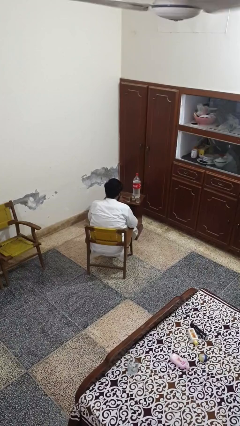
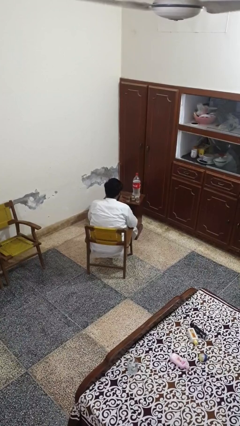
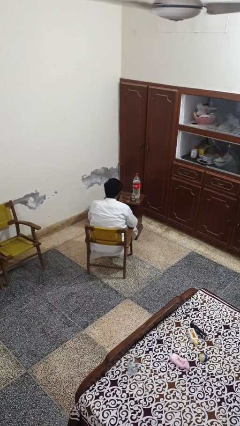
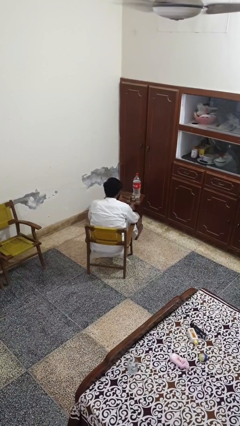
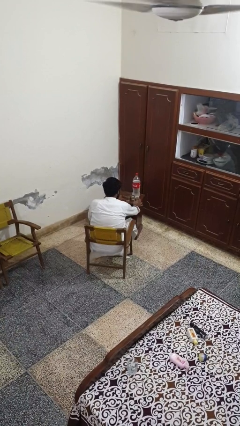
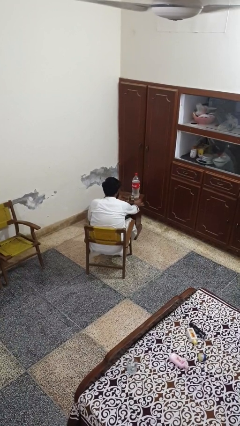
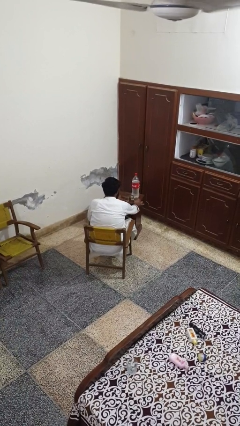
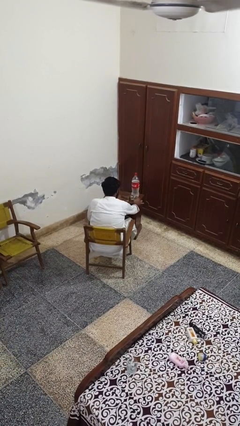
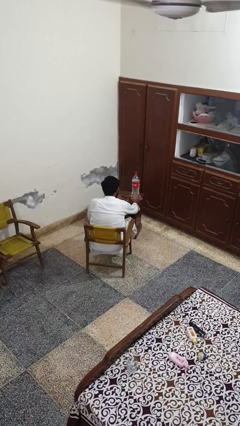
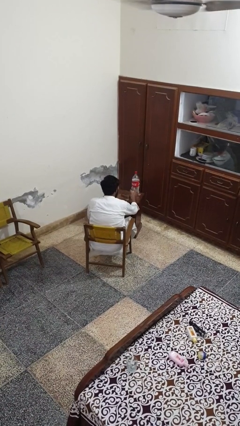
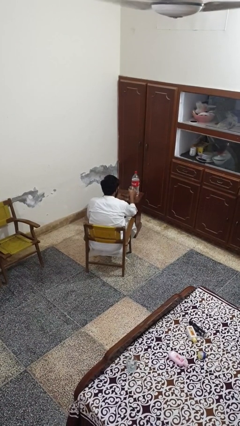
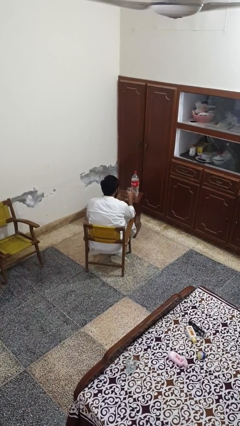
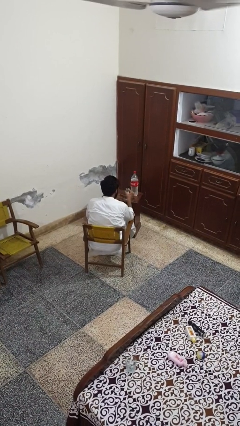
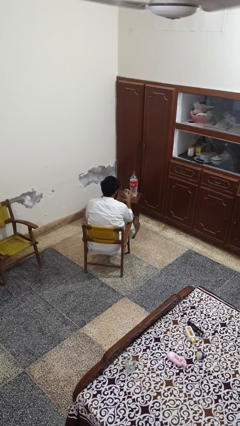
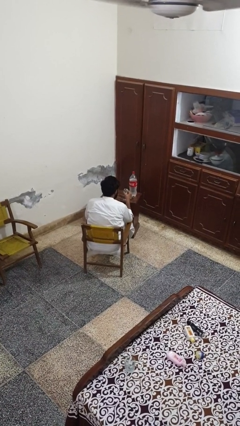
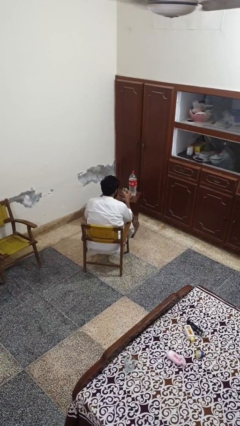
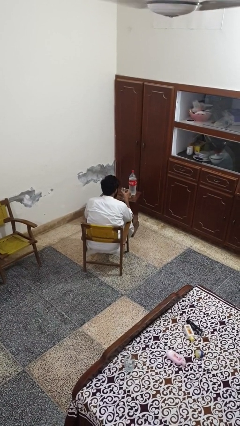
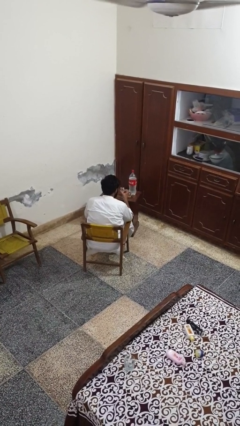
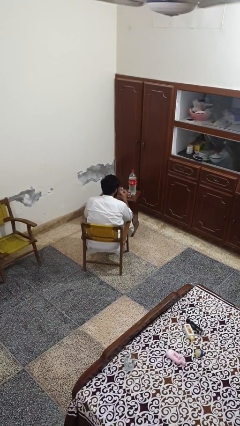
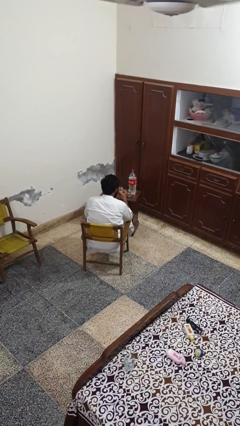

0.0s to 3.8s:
person picks up object from table

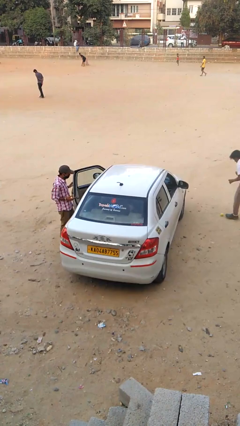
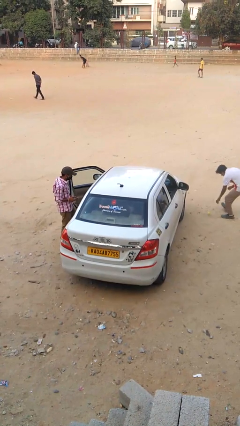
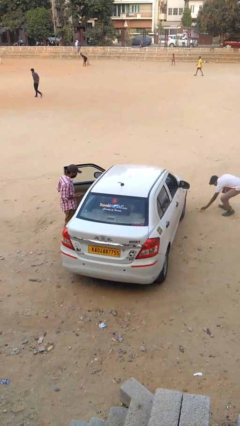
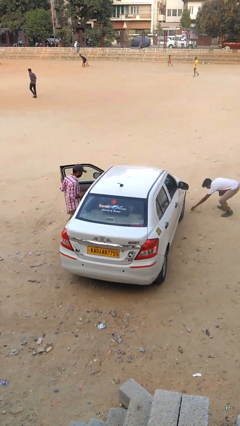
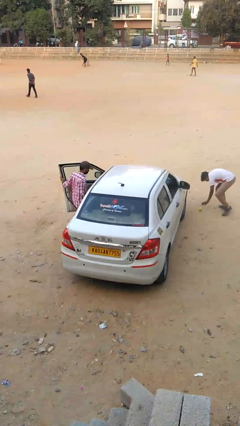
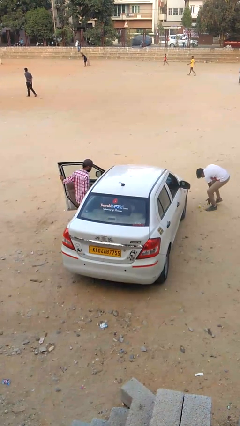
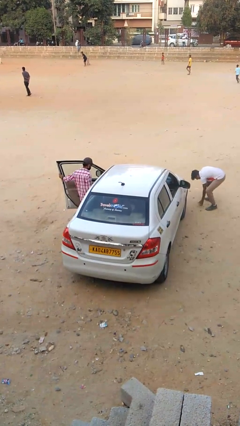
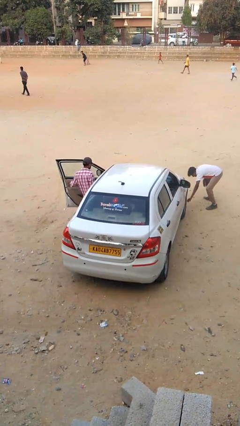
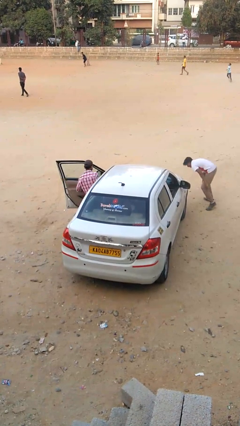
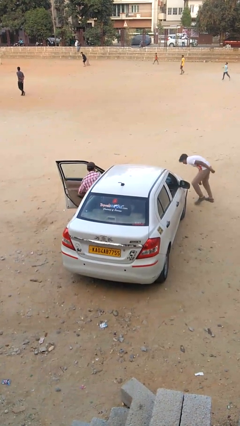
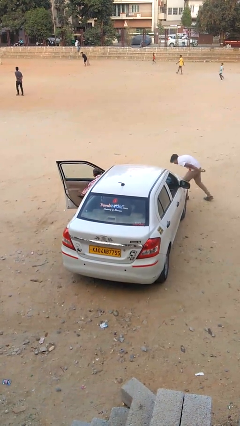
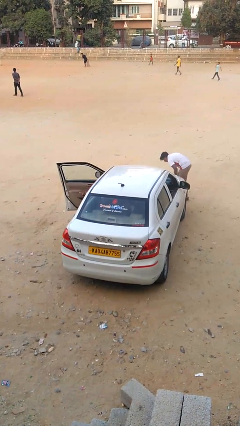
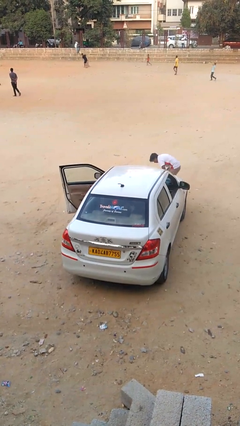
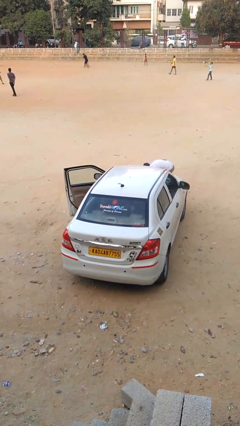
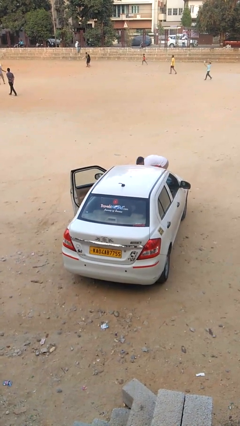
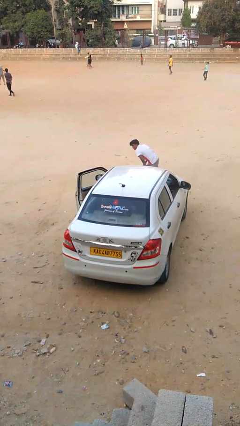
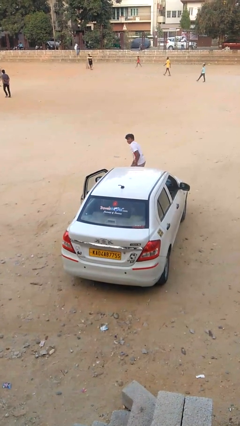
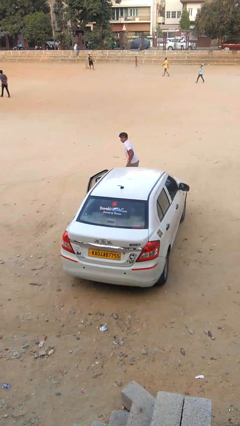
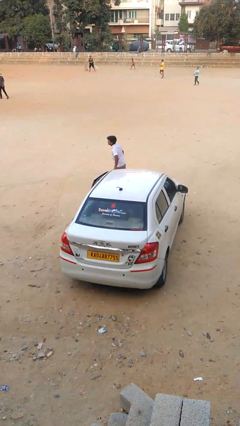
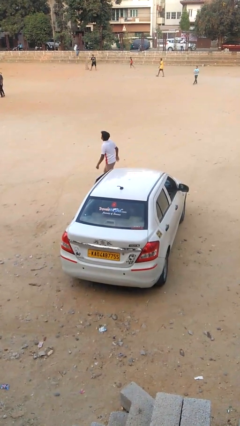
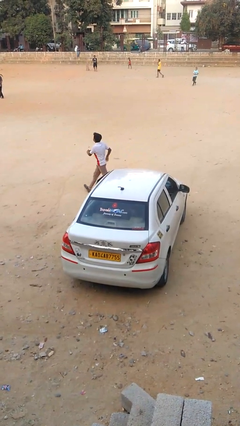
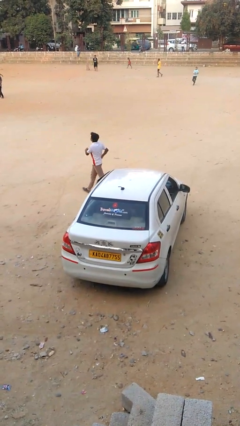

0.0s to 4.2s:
car picks up person

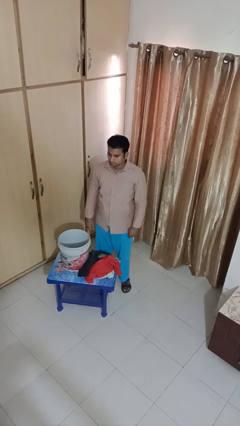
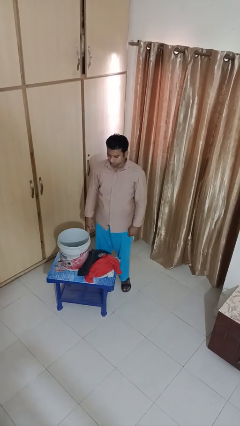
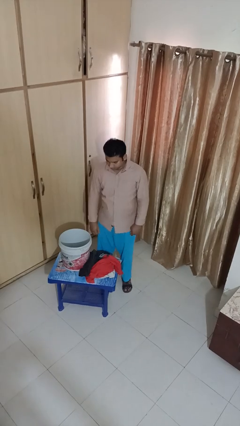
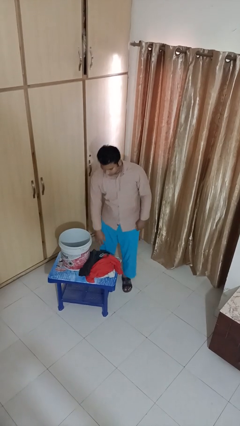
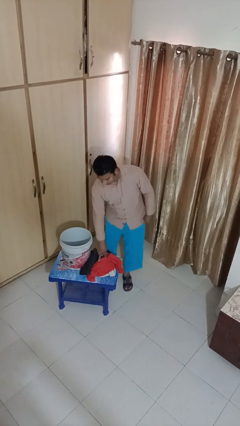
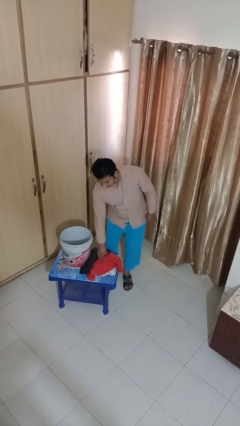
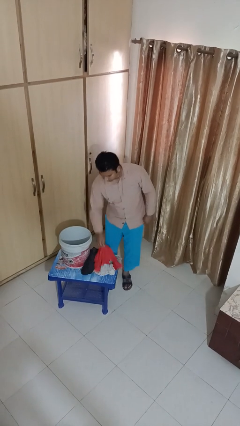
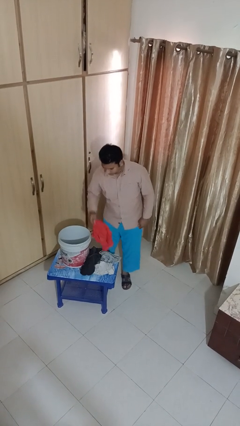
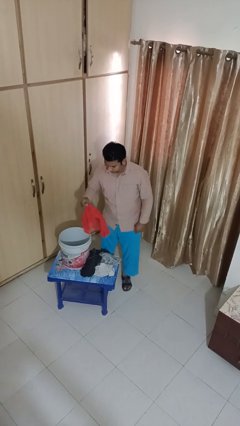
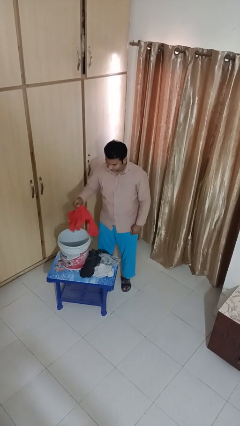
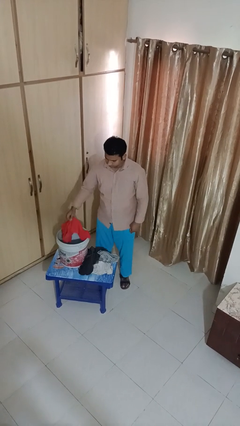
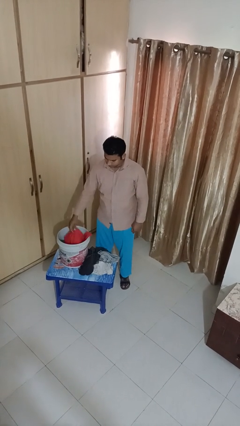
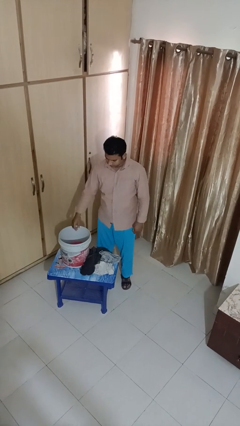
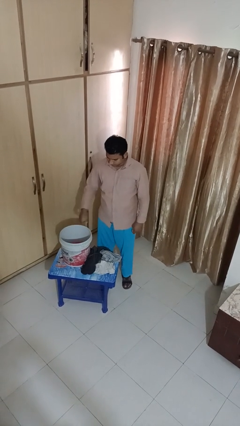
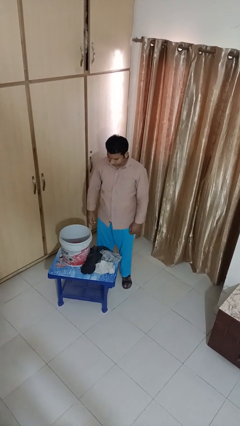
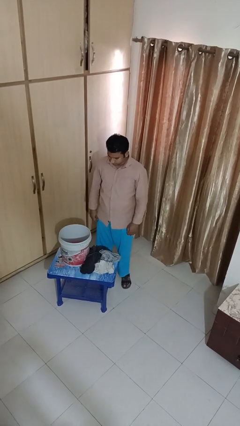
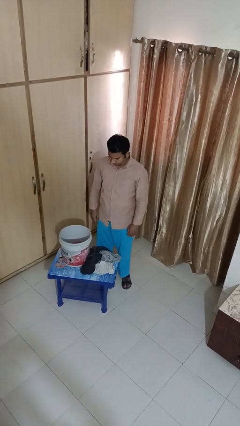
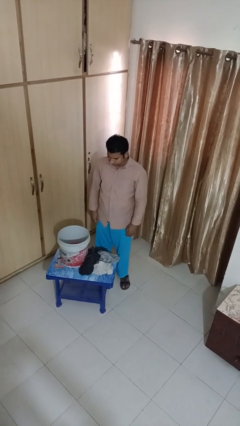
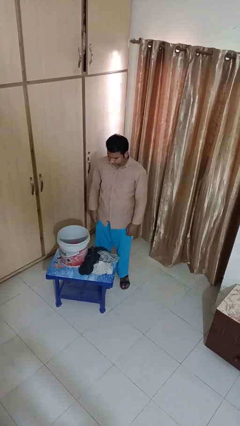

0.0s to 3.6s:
person puts object into basket

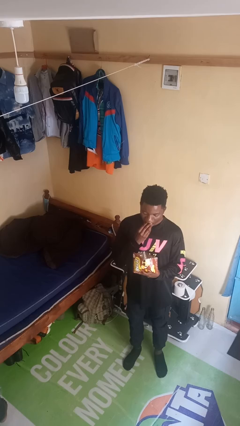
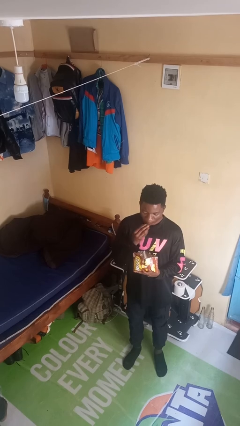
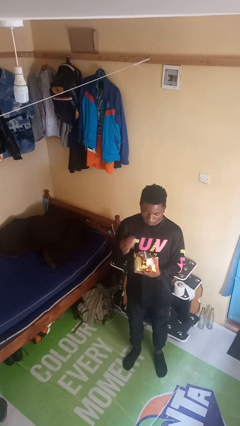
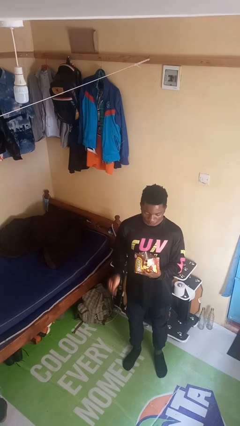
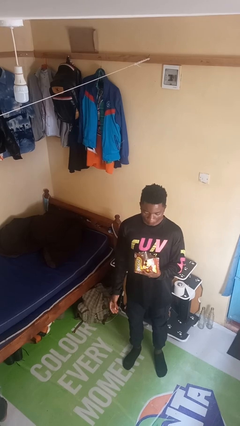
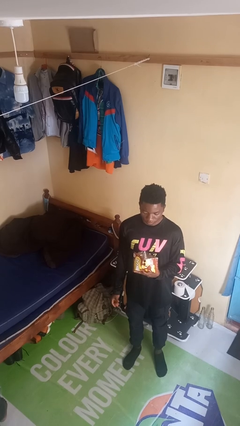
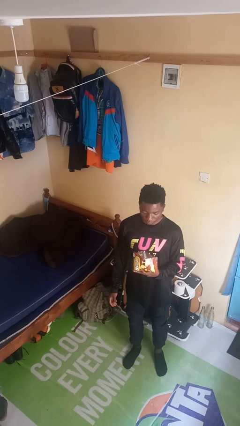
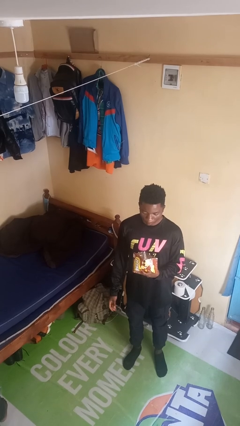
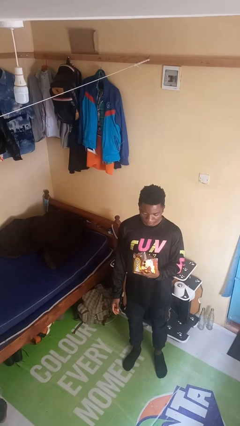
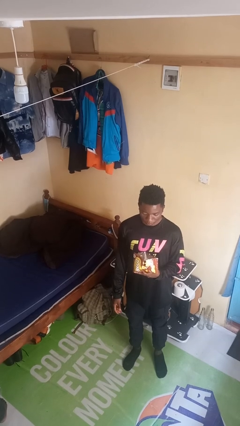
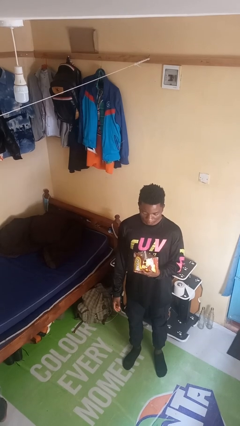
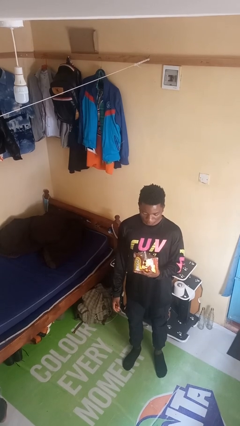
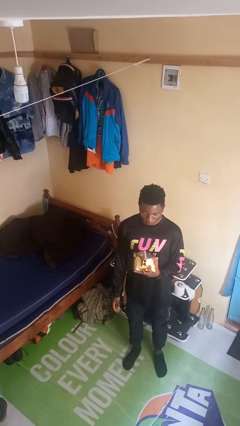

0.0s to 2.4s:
person eats snack from bag

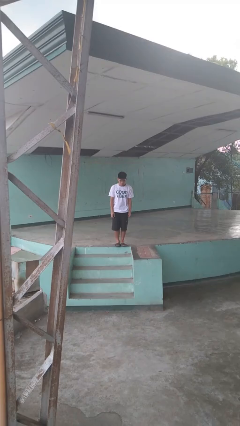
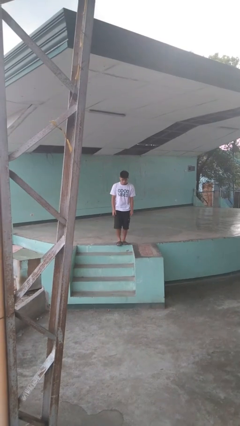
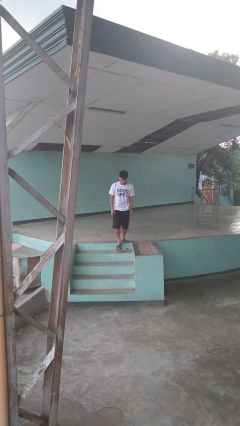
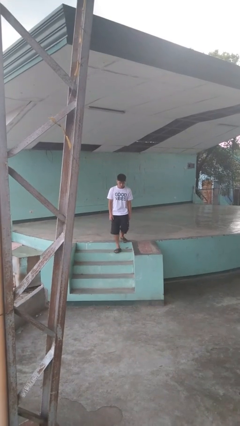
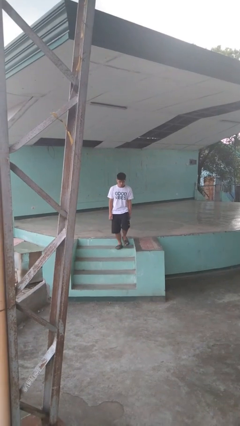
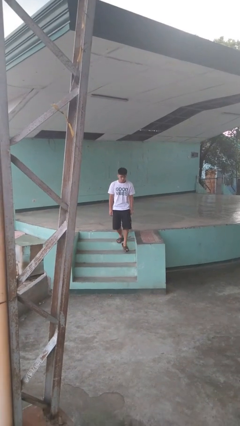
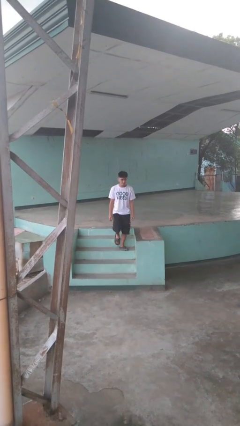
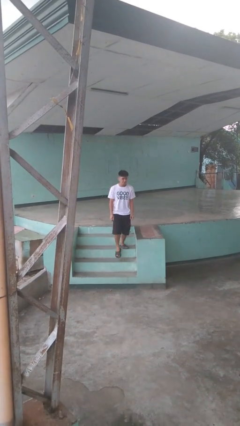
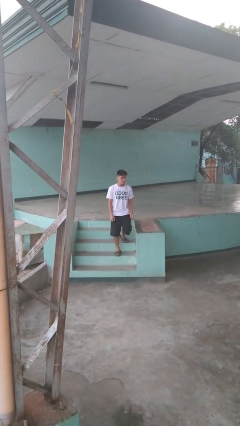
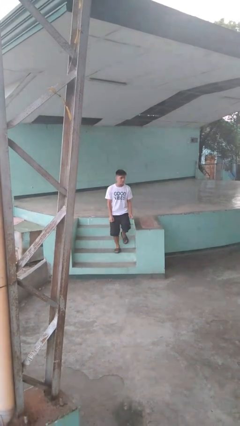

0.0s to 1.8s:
person climbs down stairs

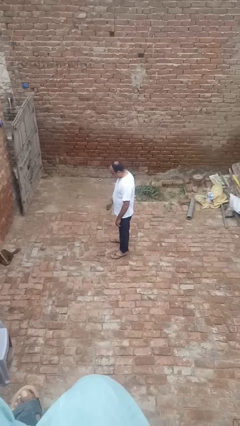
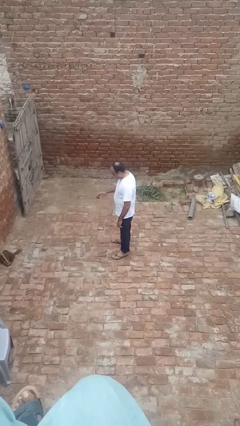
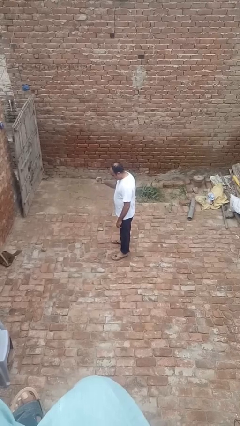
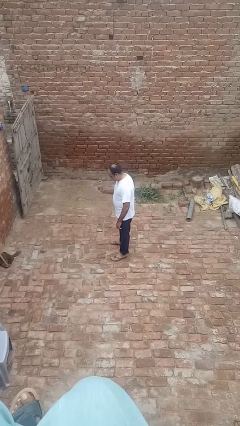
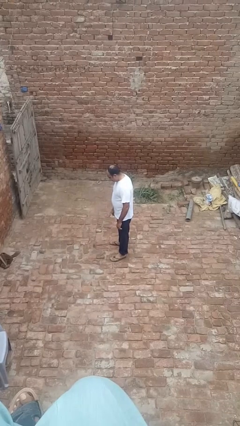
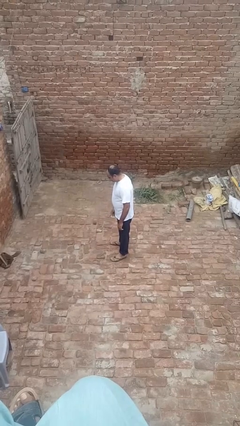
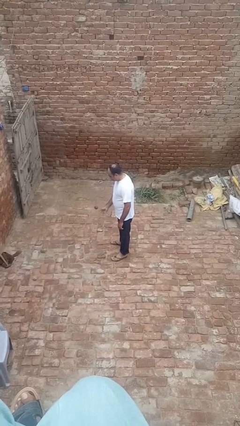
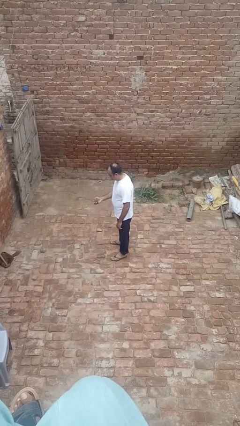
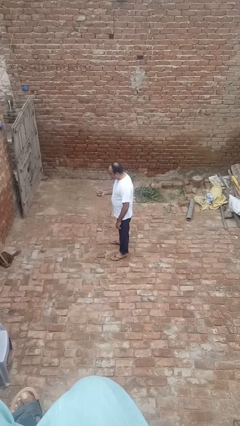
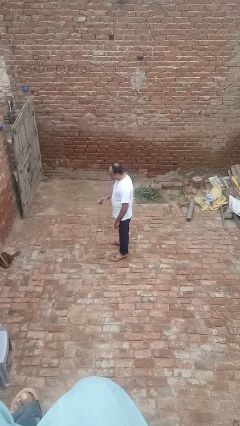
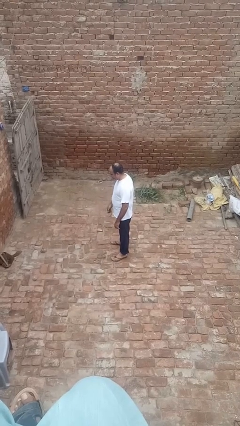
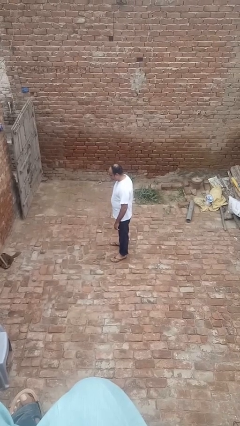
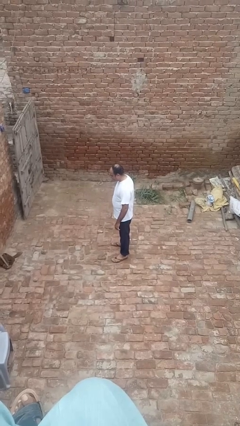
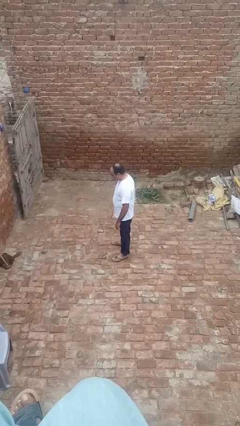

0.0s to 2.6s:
person bounces ball on floor
